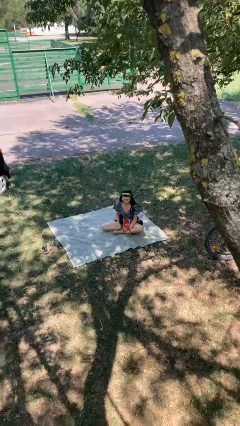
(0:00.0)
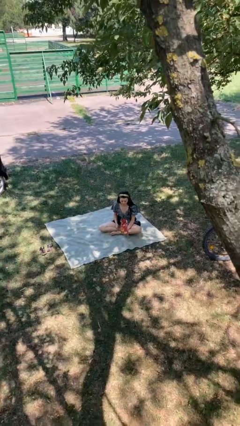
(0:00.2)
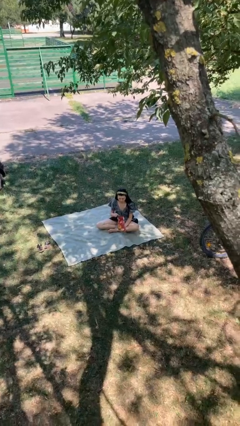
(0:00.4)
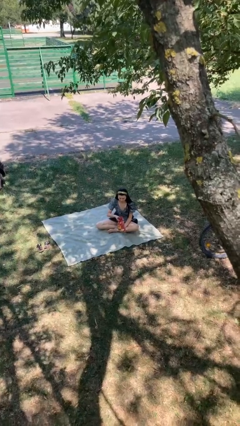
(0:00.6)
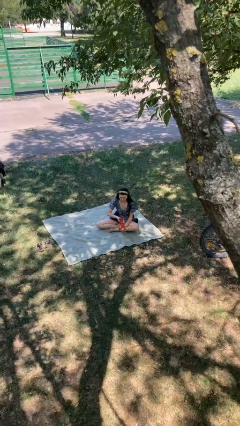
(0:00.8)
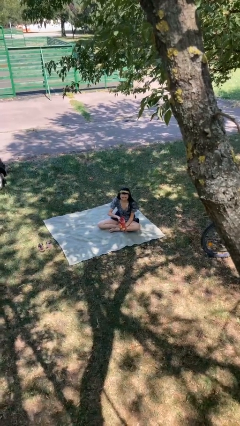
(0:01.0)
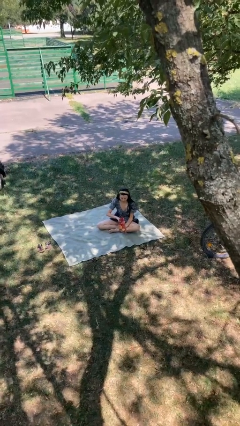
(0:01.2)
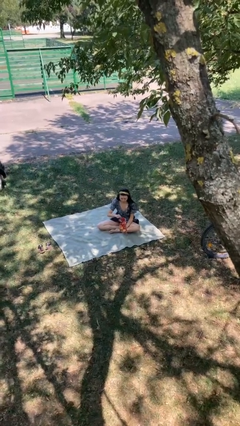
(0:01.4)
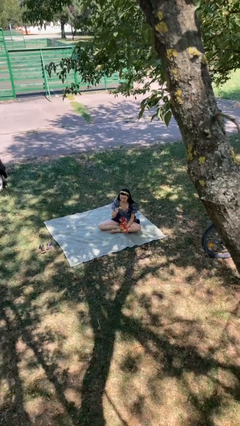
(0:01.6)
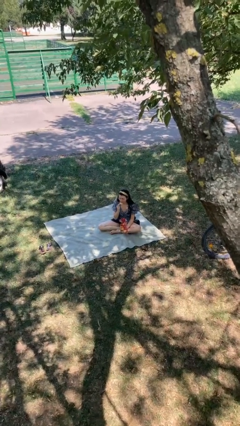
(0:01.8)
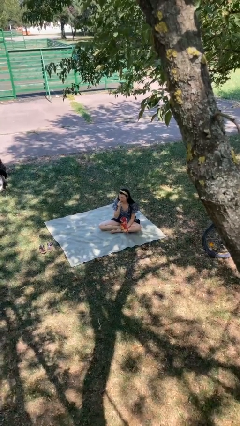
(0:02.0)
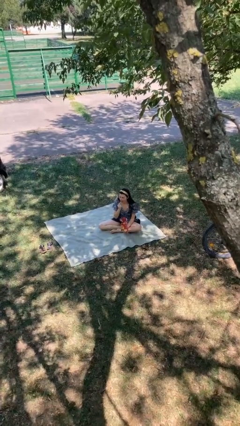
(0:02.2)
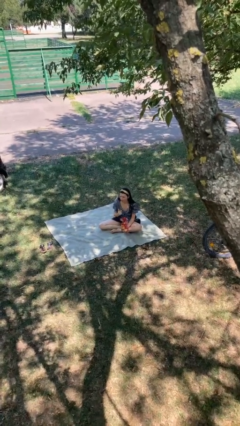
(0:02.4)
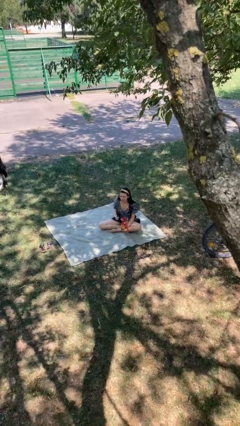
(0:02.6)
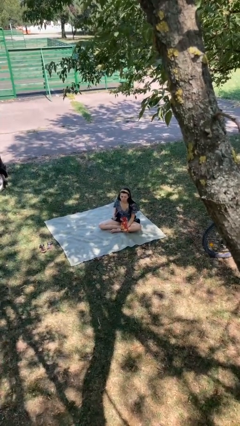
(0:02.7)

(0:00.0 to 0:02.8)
person eats snack from bag

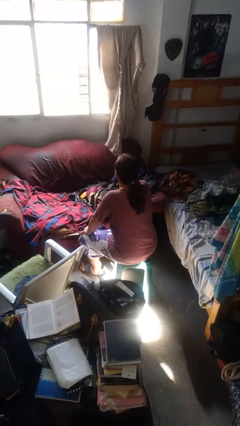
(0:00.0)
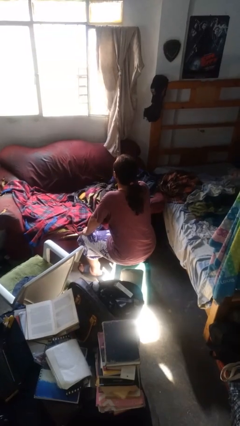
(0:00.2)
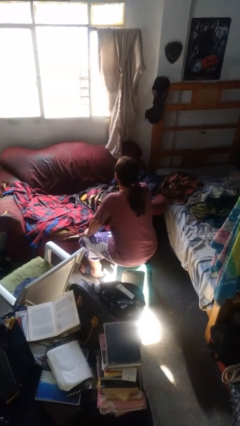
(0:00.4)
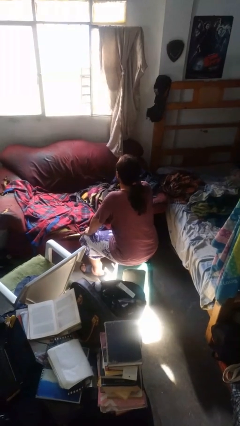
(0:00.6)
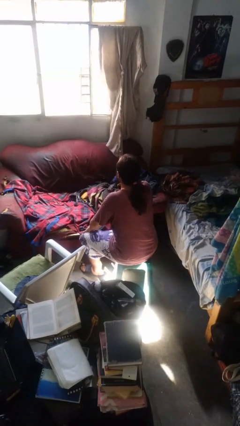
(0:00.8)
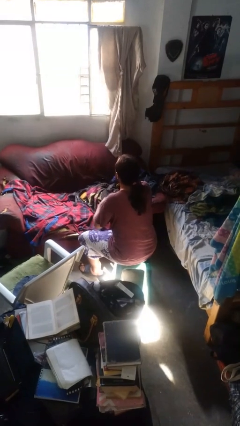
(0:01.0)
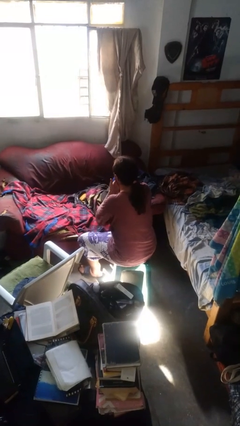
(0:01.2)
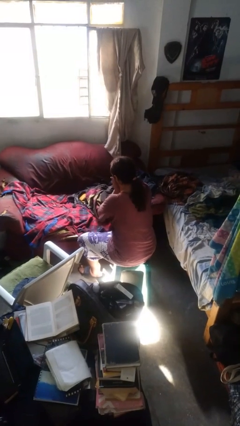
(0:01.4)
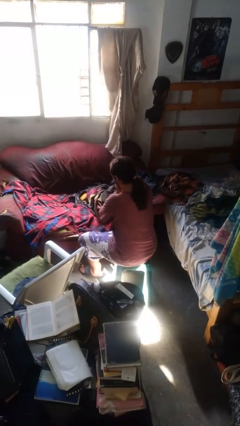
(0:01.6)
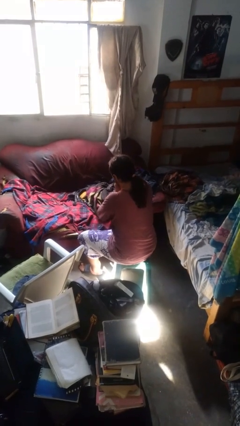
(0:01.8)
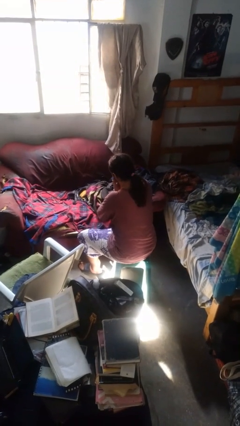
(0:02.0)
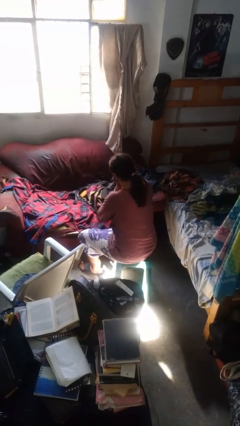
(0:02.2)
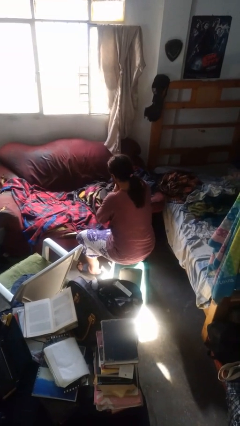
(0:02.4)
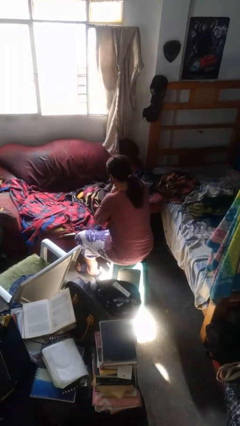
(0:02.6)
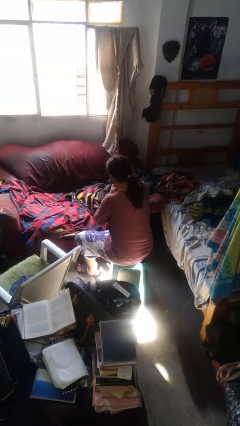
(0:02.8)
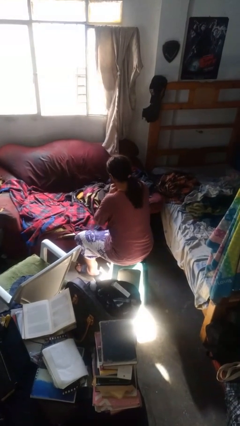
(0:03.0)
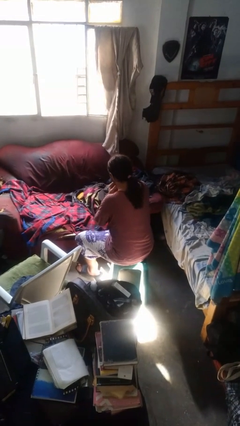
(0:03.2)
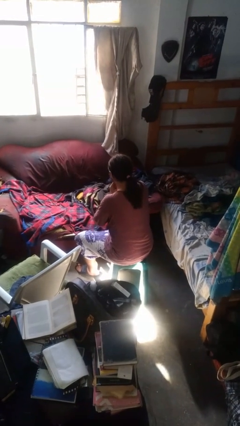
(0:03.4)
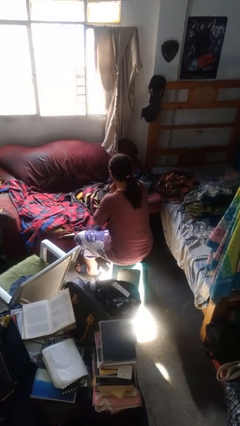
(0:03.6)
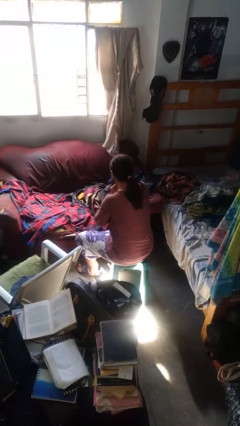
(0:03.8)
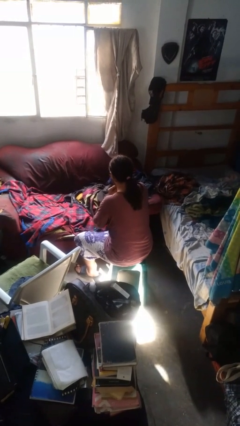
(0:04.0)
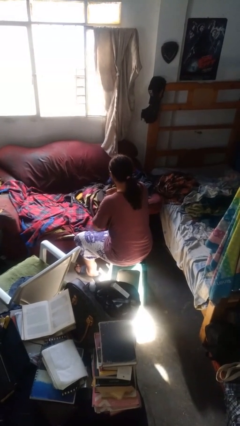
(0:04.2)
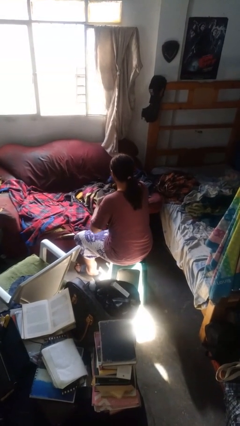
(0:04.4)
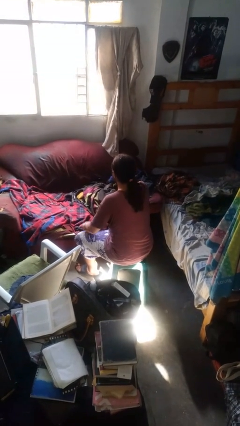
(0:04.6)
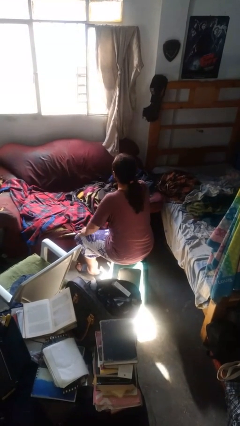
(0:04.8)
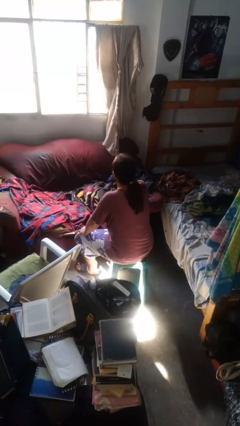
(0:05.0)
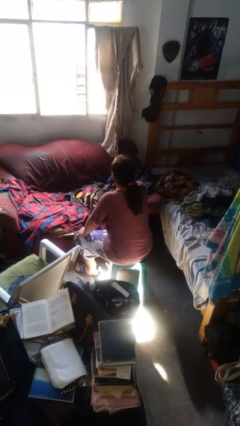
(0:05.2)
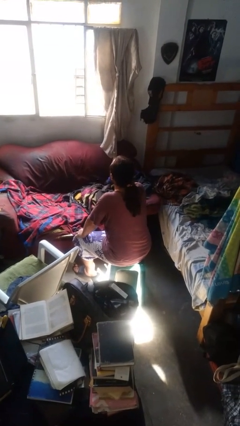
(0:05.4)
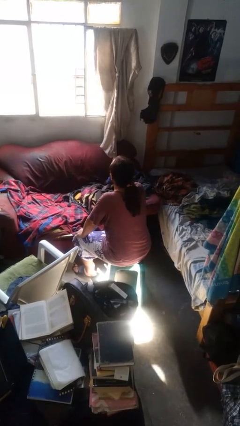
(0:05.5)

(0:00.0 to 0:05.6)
person strokes chin

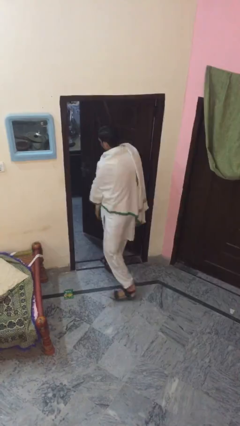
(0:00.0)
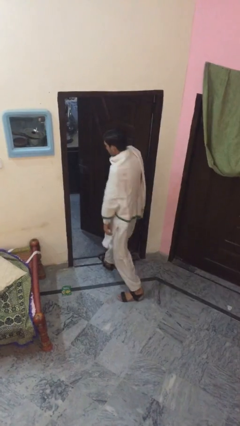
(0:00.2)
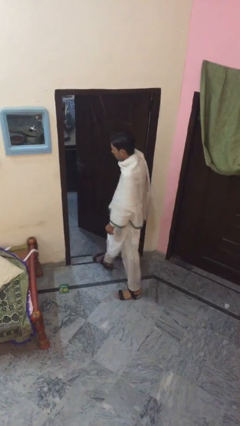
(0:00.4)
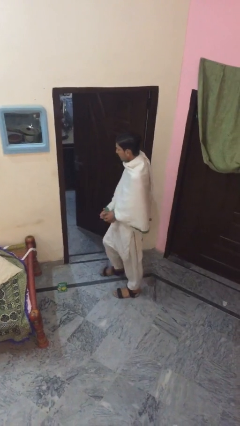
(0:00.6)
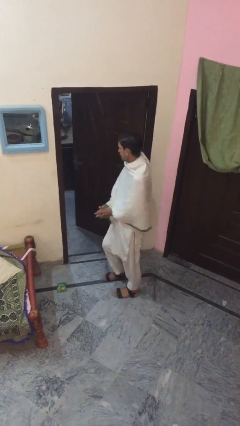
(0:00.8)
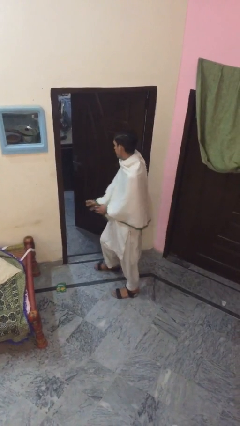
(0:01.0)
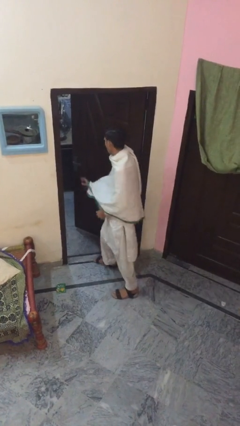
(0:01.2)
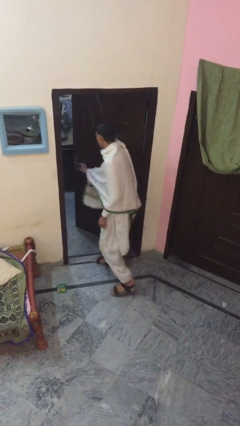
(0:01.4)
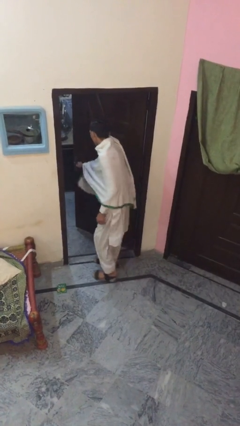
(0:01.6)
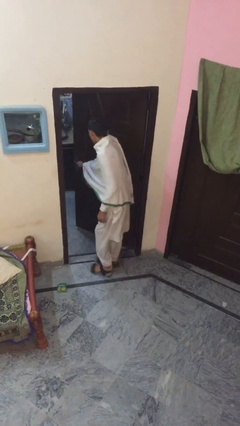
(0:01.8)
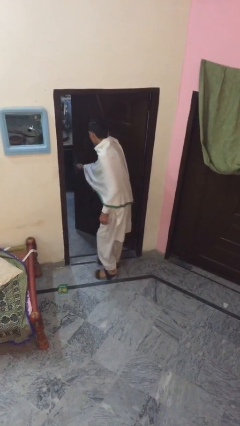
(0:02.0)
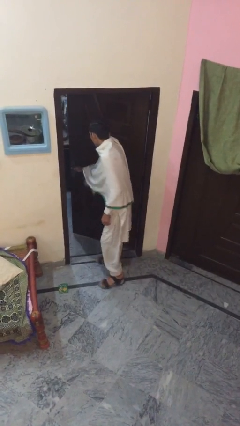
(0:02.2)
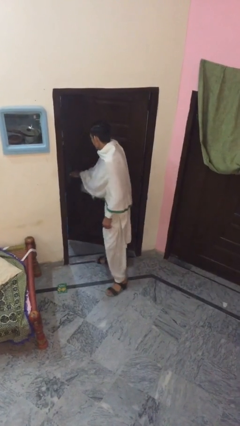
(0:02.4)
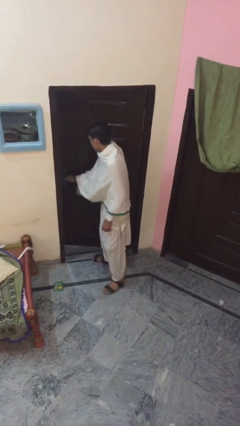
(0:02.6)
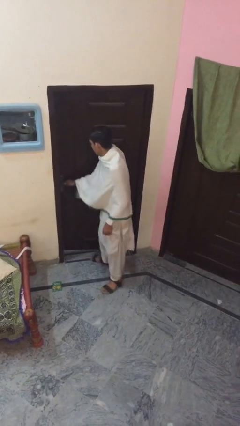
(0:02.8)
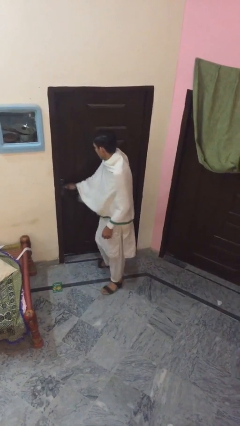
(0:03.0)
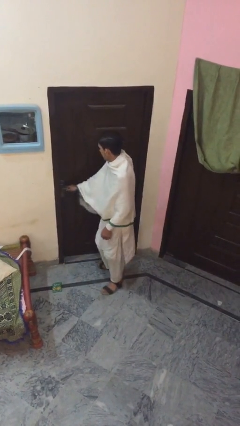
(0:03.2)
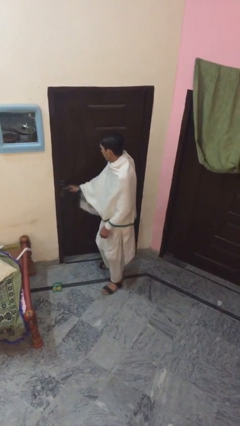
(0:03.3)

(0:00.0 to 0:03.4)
person closes facility door

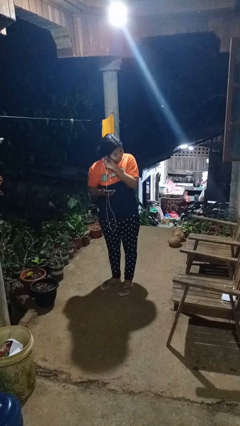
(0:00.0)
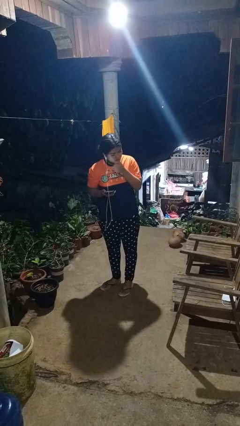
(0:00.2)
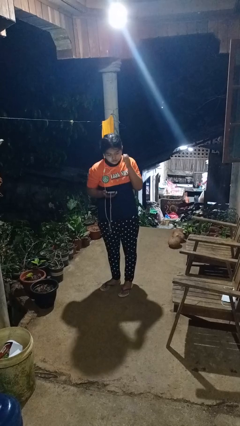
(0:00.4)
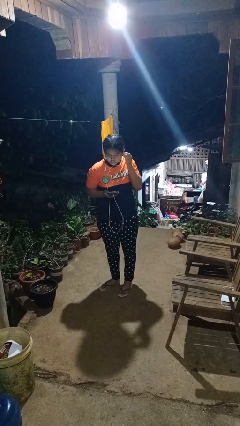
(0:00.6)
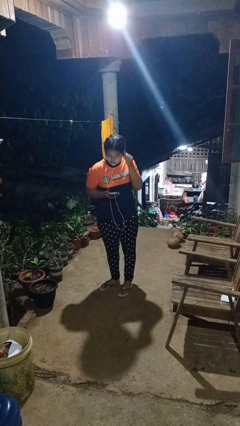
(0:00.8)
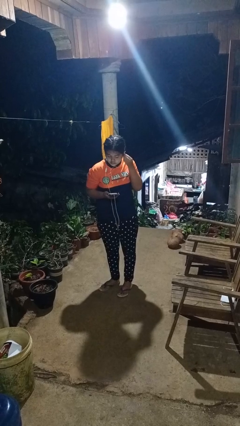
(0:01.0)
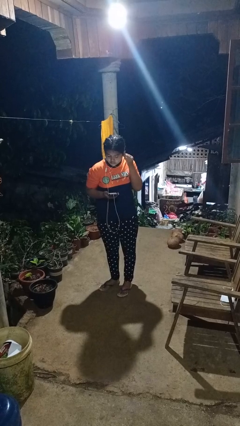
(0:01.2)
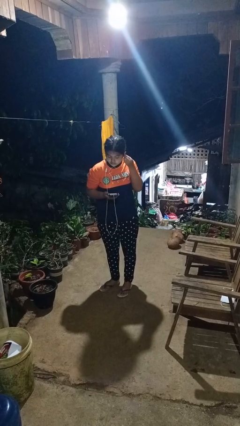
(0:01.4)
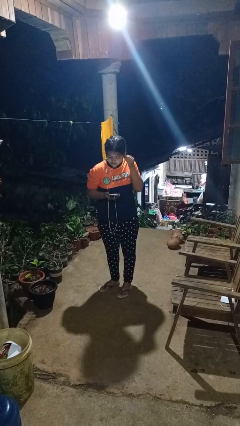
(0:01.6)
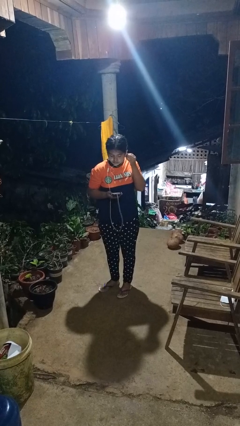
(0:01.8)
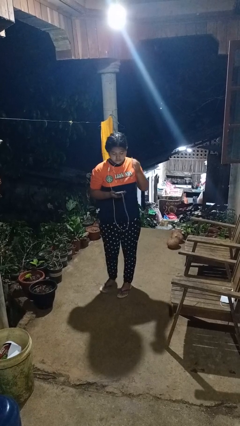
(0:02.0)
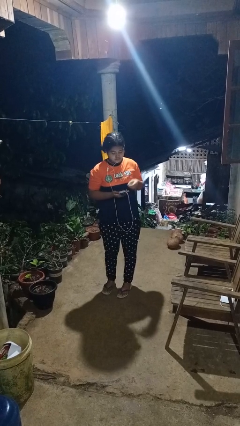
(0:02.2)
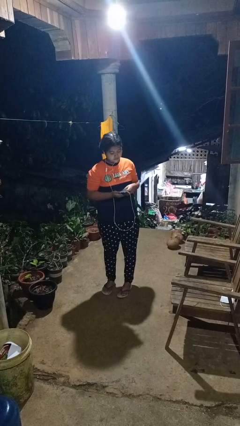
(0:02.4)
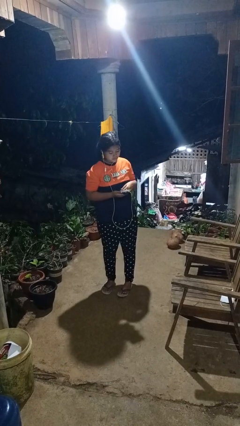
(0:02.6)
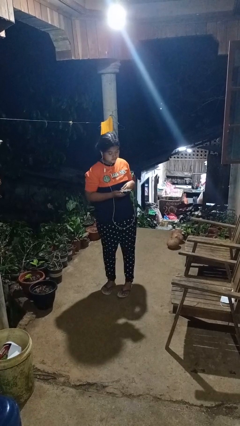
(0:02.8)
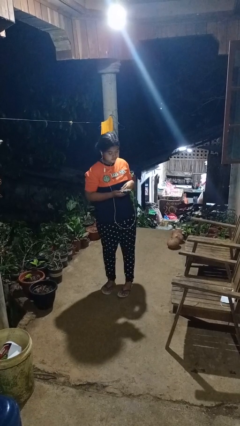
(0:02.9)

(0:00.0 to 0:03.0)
person puts on headphones

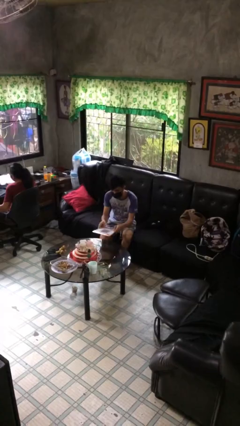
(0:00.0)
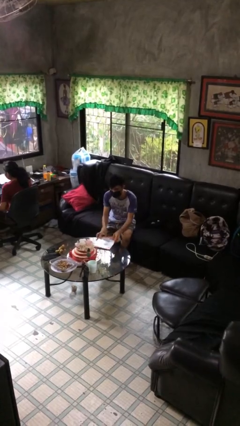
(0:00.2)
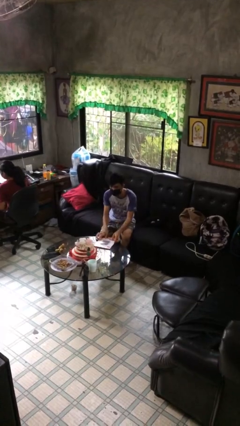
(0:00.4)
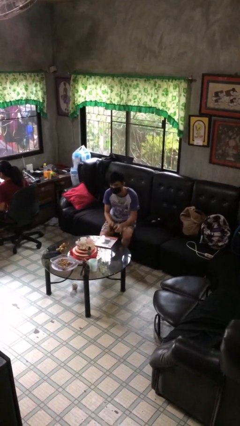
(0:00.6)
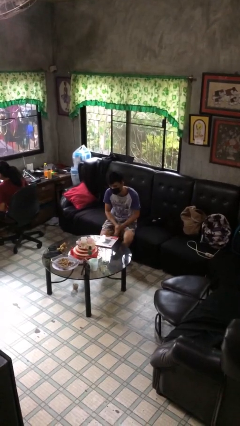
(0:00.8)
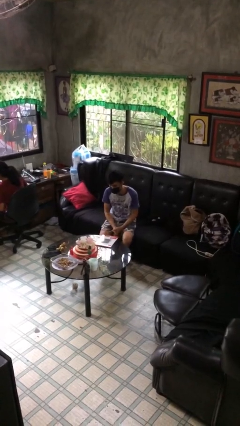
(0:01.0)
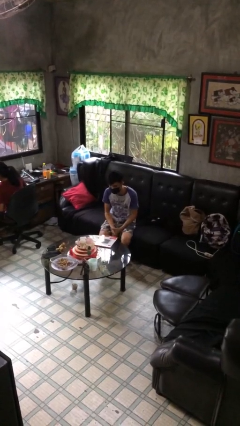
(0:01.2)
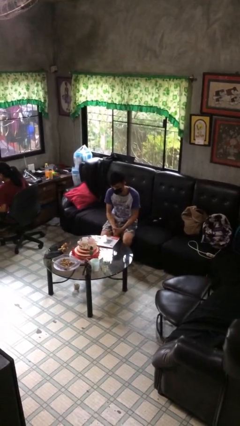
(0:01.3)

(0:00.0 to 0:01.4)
person puts down object on table

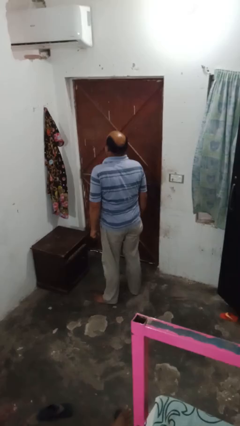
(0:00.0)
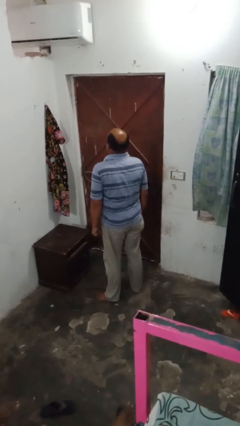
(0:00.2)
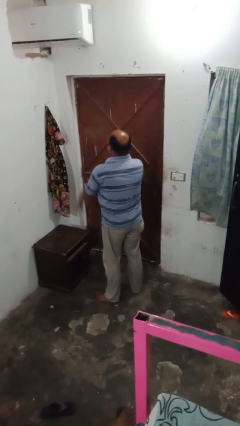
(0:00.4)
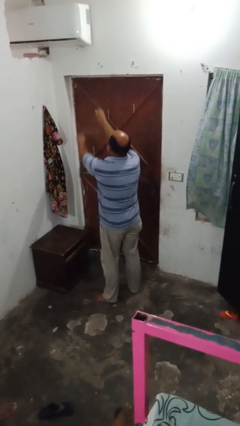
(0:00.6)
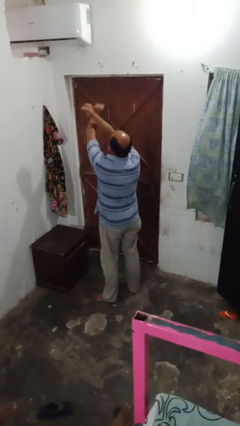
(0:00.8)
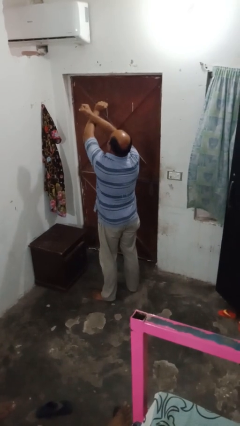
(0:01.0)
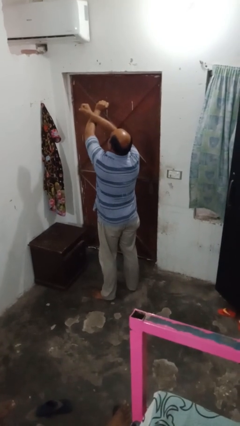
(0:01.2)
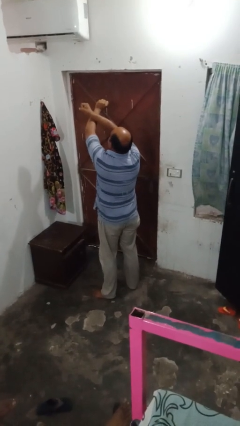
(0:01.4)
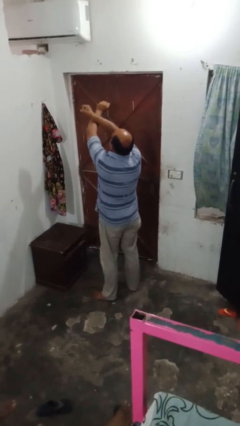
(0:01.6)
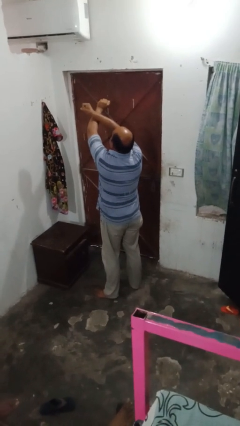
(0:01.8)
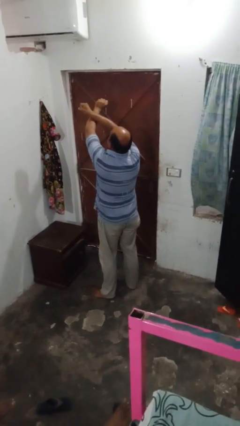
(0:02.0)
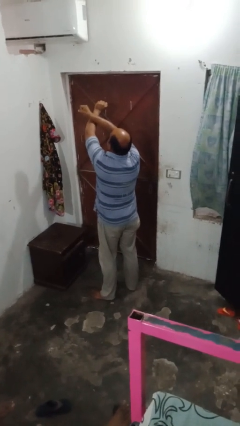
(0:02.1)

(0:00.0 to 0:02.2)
person gestures arms x
